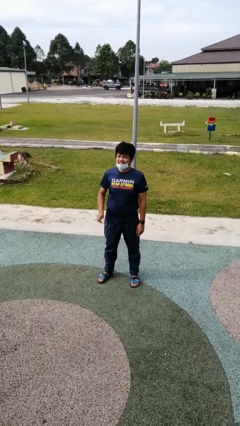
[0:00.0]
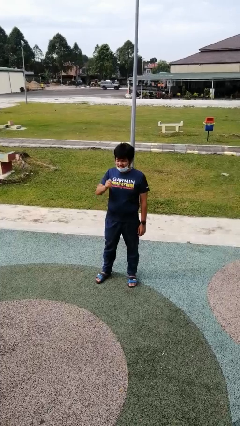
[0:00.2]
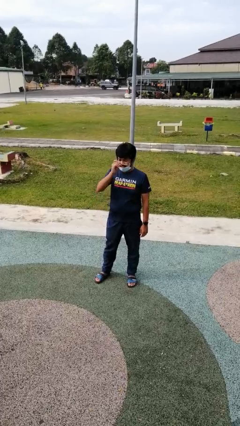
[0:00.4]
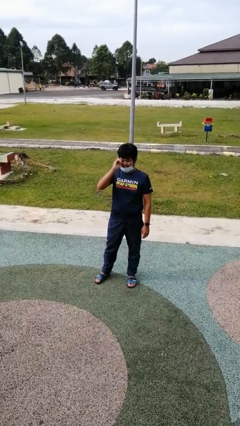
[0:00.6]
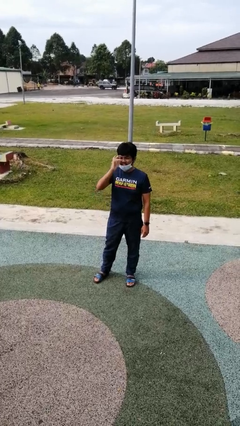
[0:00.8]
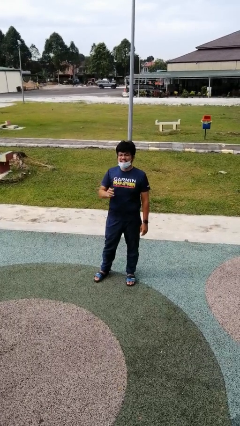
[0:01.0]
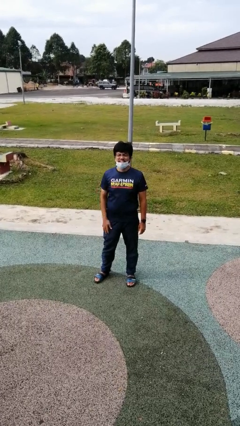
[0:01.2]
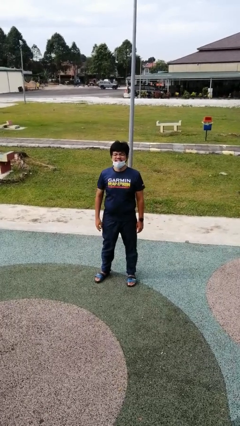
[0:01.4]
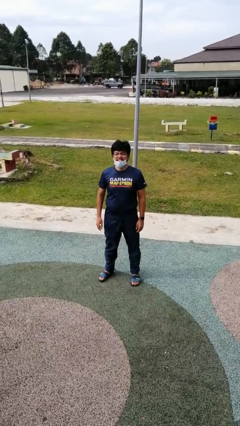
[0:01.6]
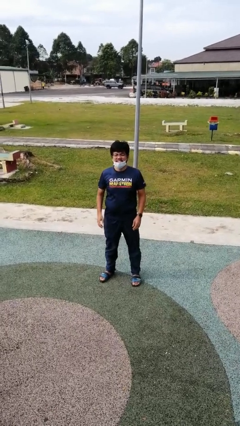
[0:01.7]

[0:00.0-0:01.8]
person puts on glasses

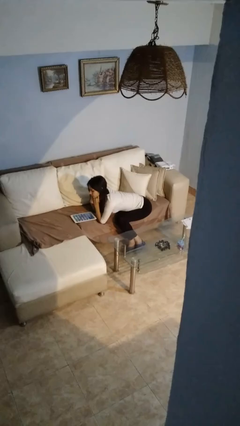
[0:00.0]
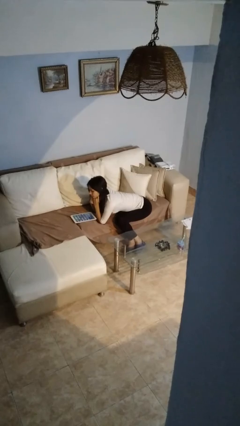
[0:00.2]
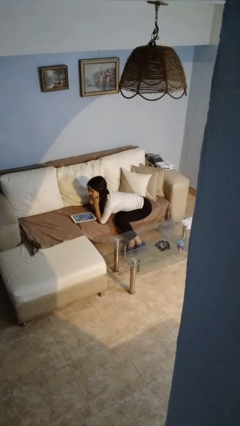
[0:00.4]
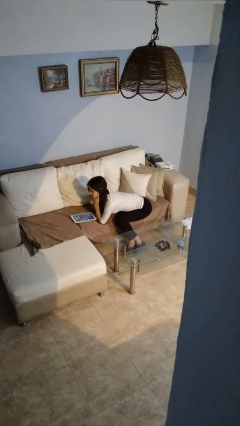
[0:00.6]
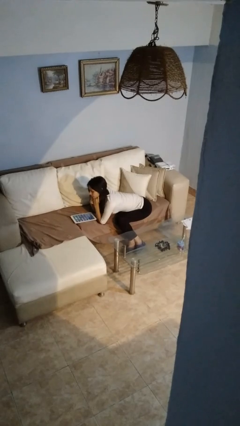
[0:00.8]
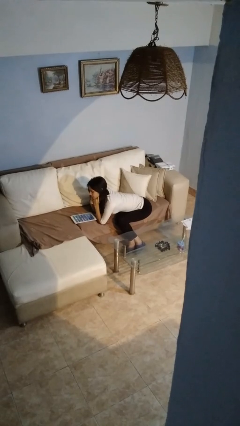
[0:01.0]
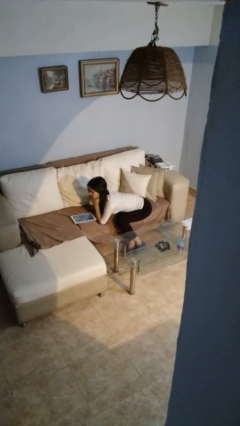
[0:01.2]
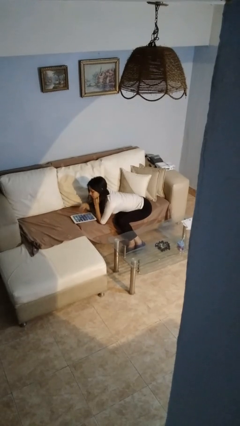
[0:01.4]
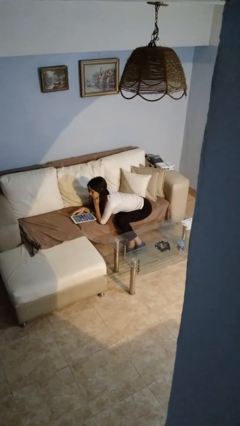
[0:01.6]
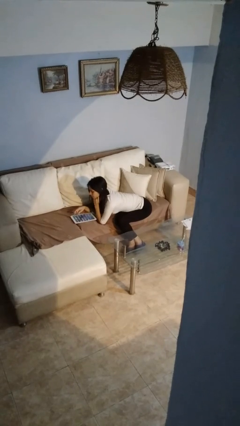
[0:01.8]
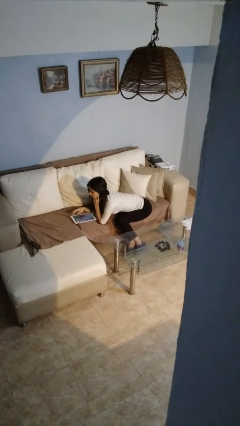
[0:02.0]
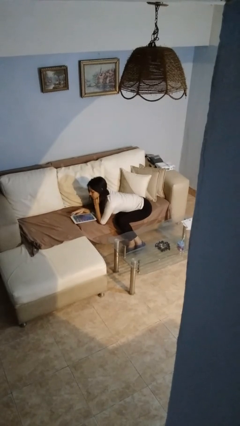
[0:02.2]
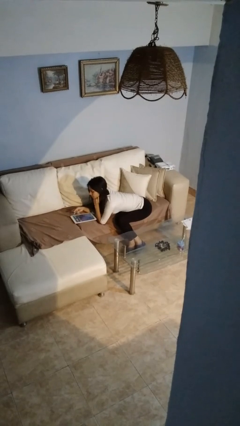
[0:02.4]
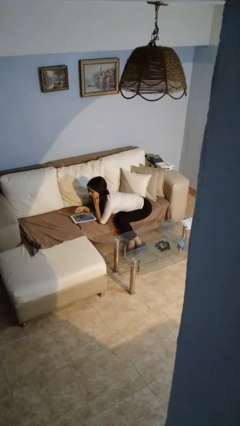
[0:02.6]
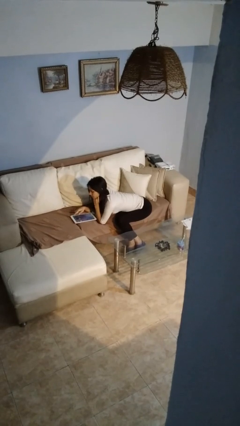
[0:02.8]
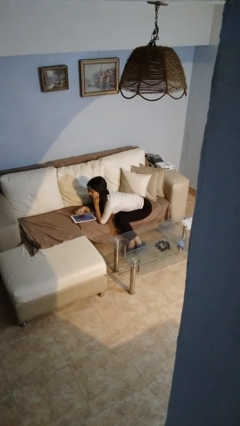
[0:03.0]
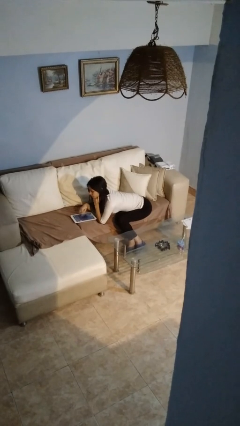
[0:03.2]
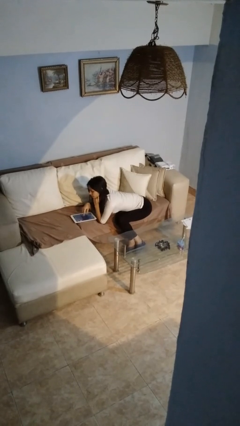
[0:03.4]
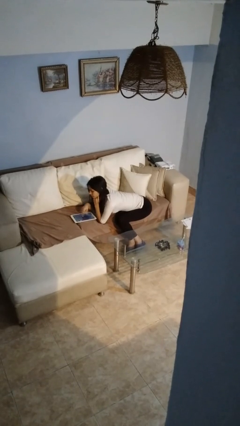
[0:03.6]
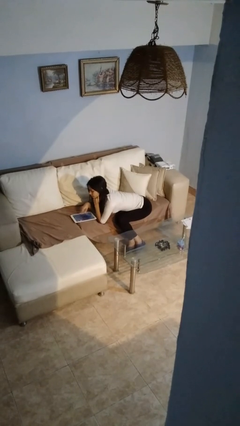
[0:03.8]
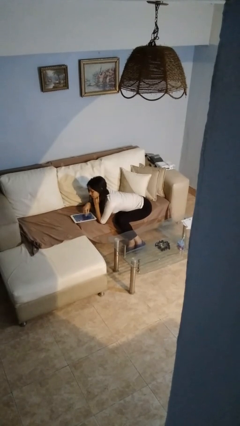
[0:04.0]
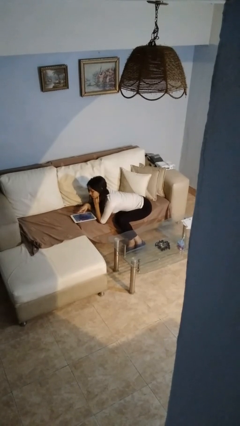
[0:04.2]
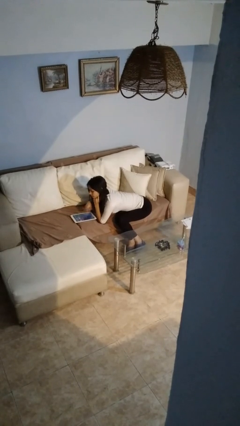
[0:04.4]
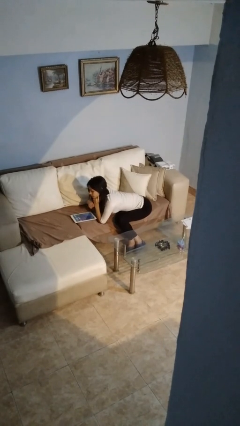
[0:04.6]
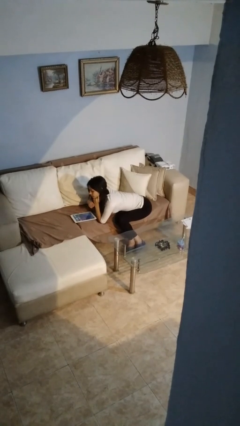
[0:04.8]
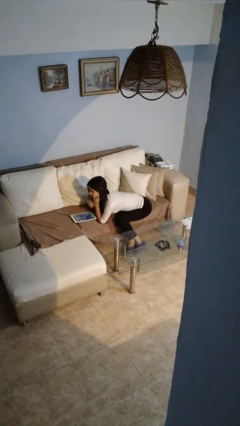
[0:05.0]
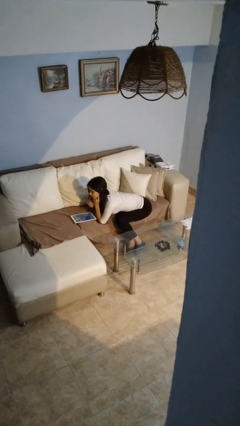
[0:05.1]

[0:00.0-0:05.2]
person interacts with tablet

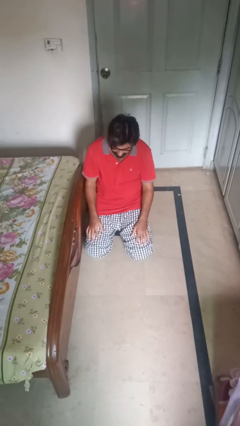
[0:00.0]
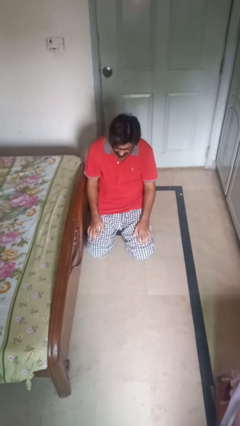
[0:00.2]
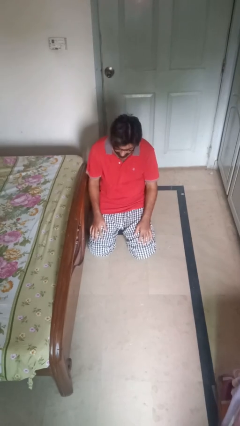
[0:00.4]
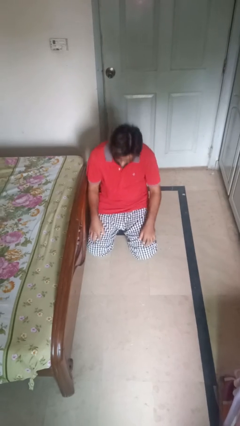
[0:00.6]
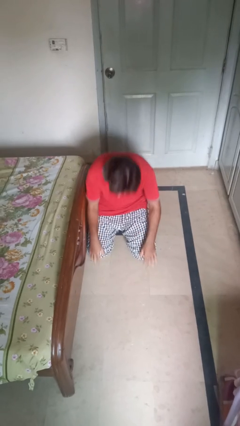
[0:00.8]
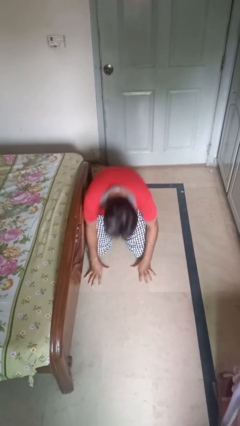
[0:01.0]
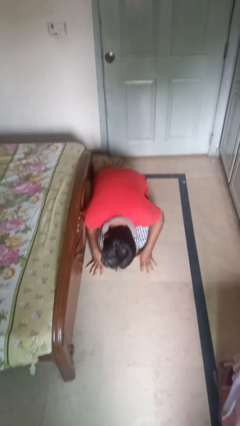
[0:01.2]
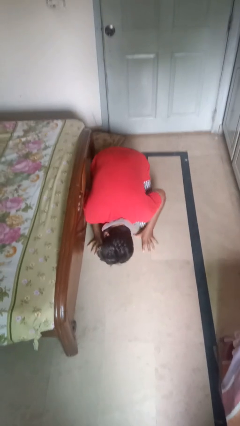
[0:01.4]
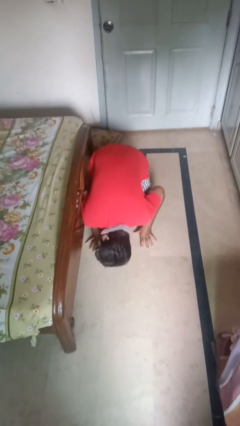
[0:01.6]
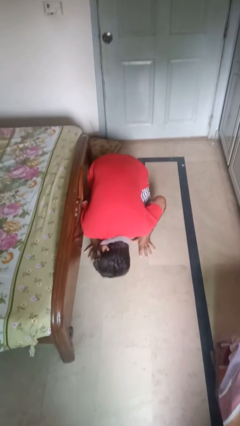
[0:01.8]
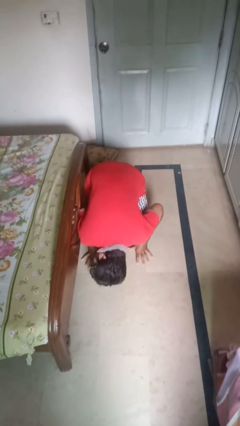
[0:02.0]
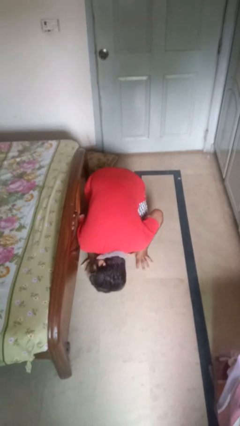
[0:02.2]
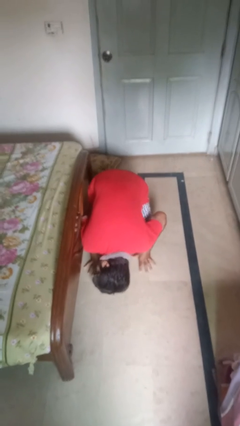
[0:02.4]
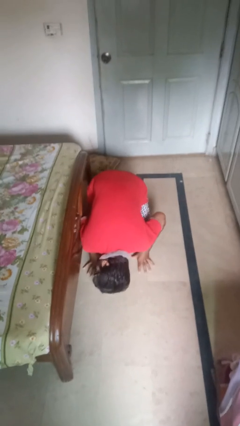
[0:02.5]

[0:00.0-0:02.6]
person searches under bed

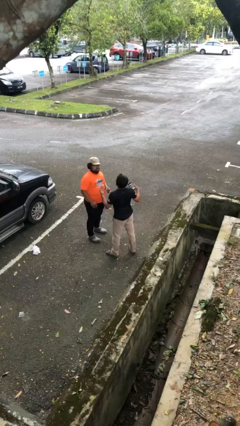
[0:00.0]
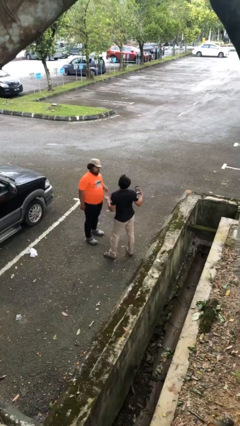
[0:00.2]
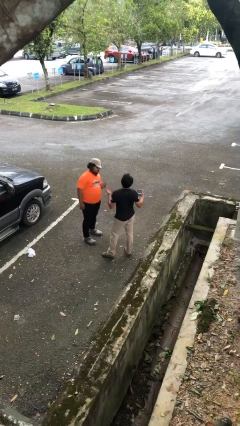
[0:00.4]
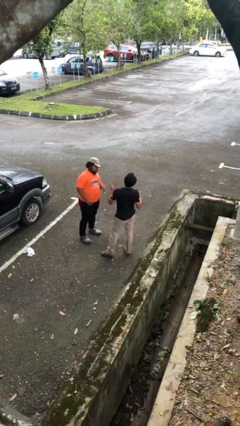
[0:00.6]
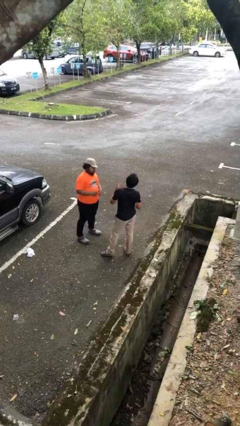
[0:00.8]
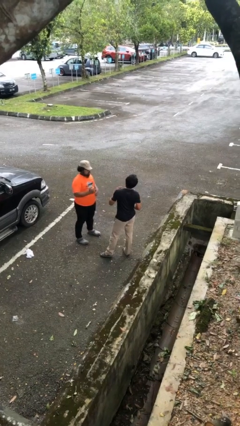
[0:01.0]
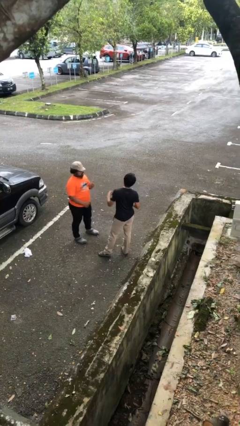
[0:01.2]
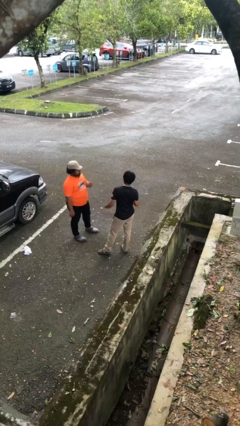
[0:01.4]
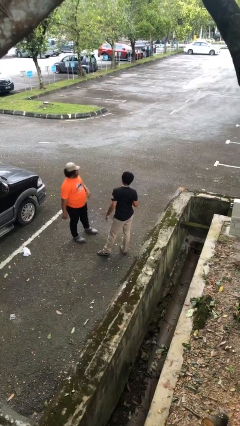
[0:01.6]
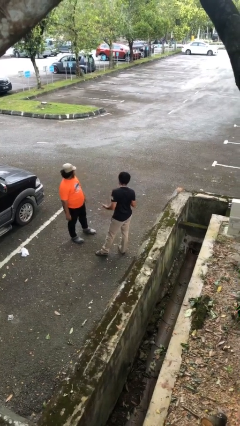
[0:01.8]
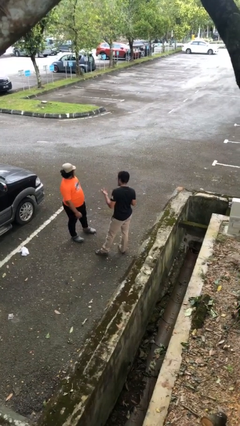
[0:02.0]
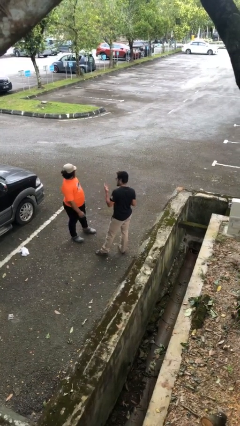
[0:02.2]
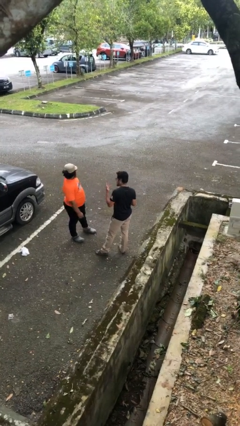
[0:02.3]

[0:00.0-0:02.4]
person talks to person

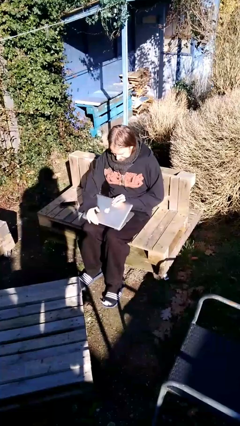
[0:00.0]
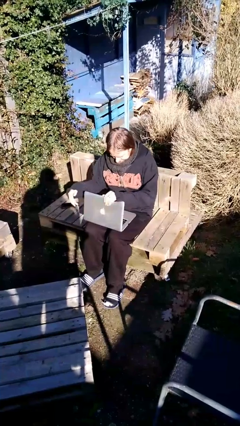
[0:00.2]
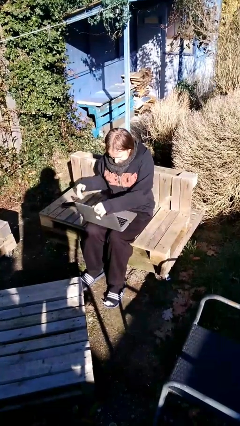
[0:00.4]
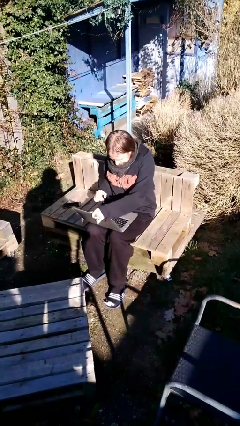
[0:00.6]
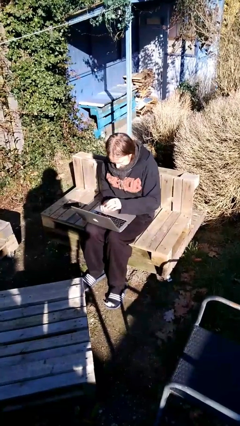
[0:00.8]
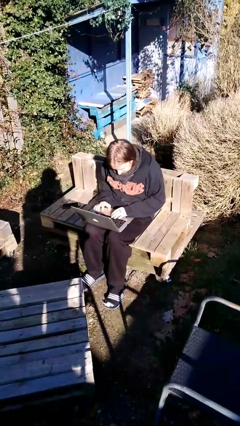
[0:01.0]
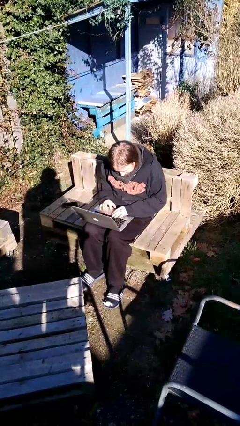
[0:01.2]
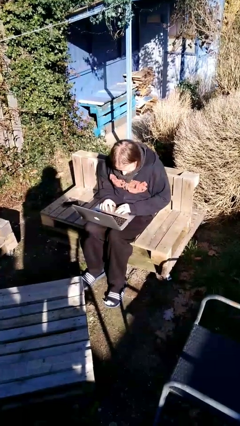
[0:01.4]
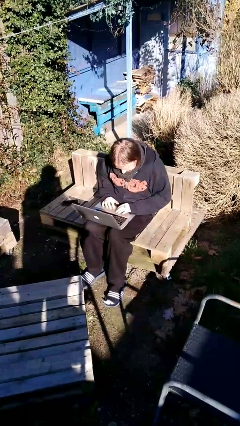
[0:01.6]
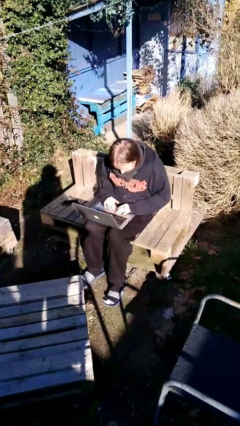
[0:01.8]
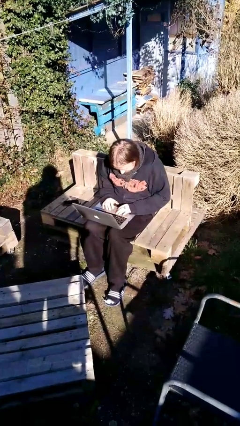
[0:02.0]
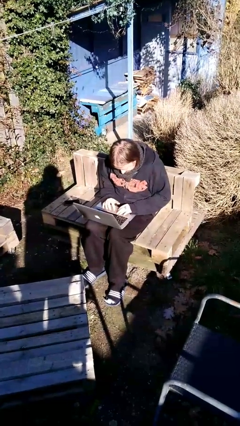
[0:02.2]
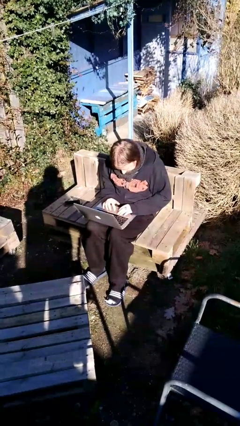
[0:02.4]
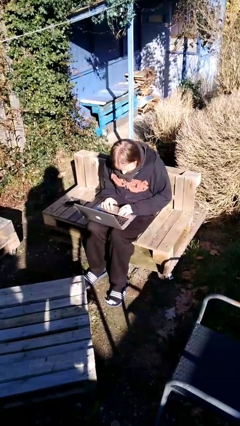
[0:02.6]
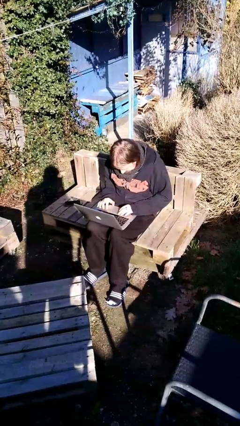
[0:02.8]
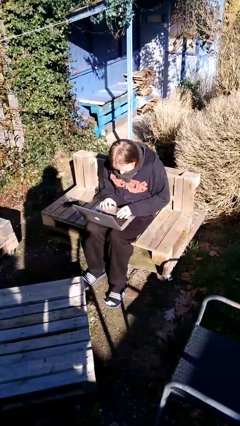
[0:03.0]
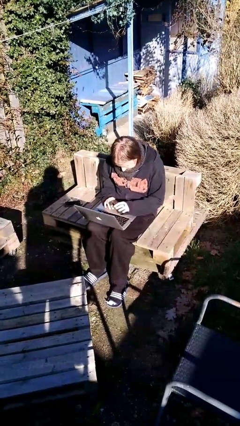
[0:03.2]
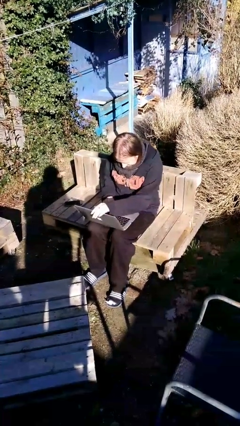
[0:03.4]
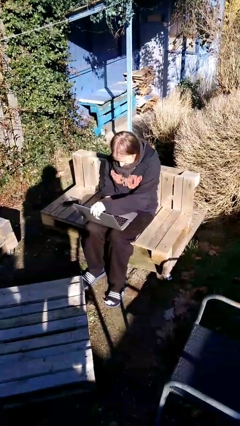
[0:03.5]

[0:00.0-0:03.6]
person interacts with laptop

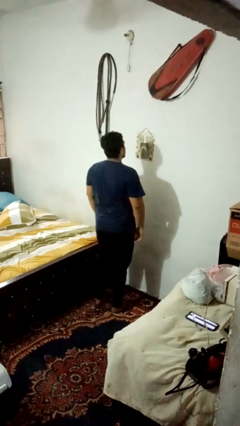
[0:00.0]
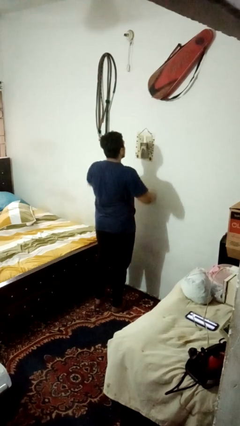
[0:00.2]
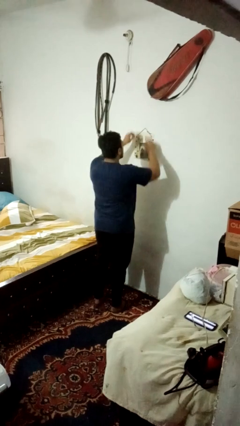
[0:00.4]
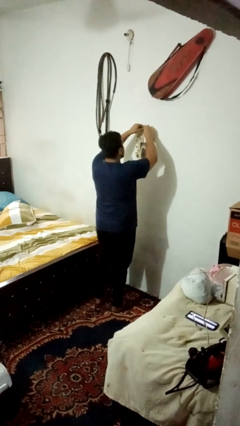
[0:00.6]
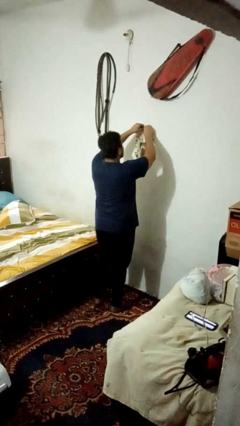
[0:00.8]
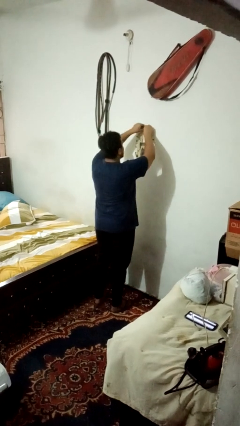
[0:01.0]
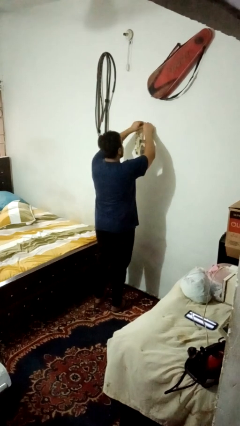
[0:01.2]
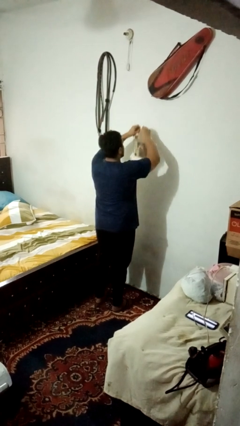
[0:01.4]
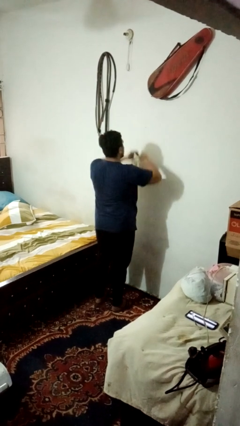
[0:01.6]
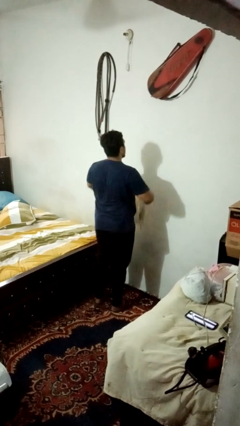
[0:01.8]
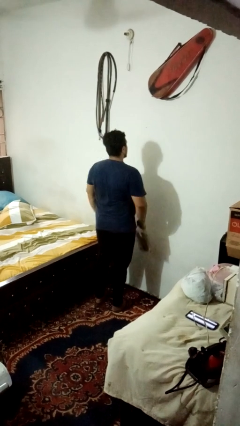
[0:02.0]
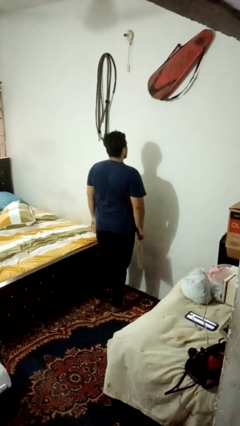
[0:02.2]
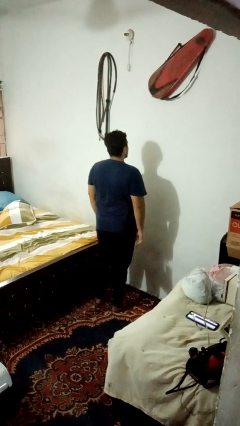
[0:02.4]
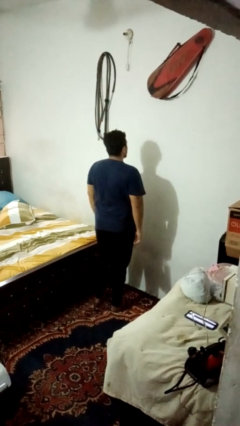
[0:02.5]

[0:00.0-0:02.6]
person takes down picture frame
